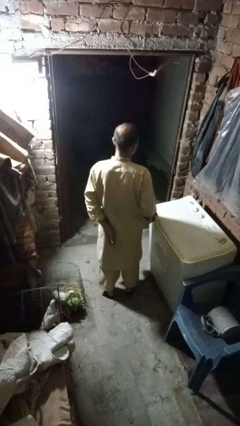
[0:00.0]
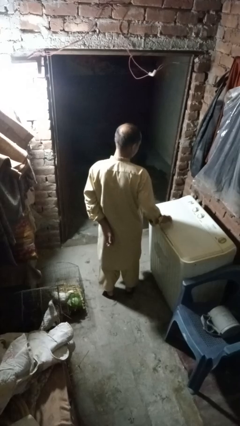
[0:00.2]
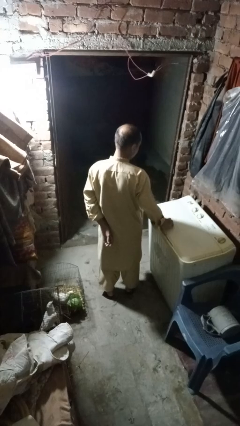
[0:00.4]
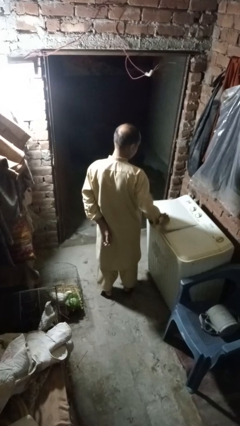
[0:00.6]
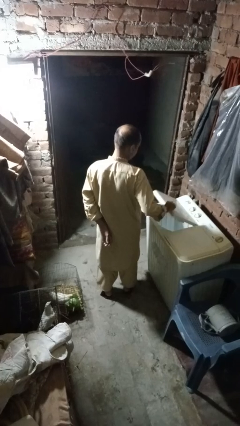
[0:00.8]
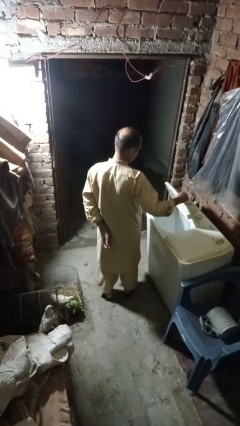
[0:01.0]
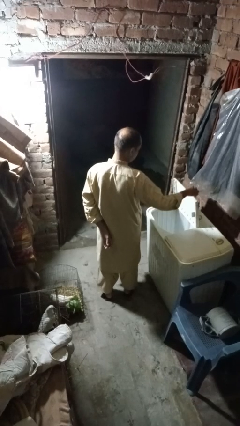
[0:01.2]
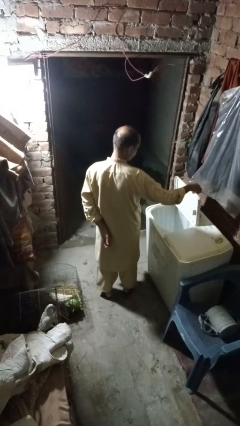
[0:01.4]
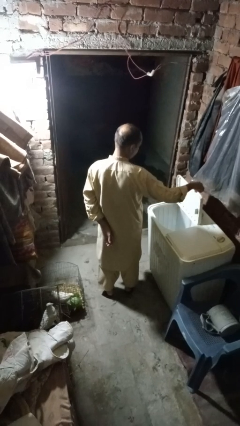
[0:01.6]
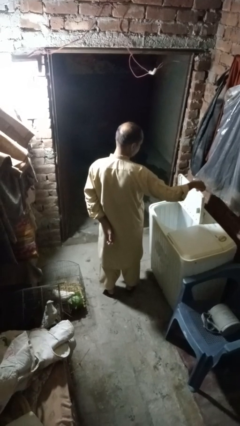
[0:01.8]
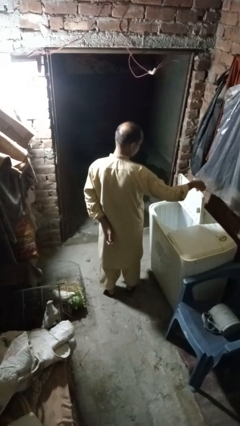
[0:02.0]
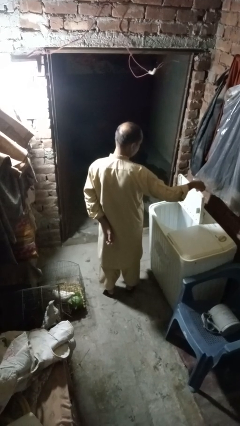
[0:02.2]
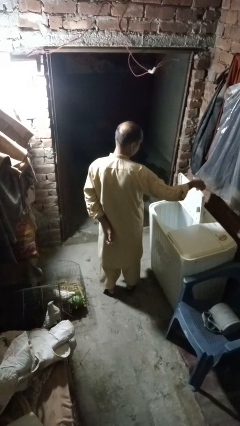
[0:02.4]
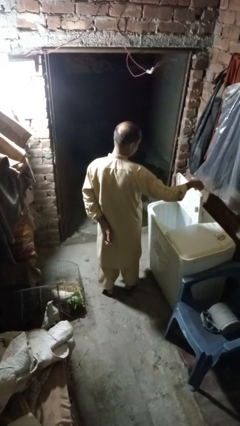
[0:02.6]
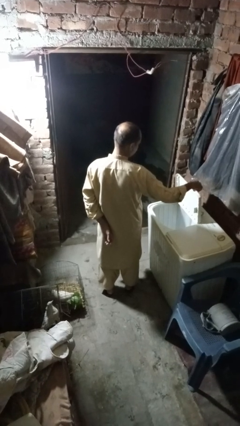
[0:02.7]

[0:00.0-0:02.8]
person opens clothes washer

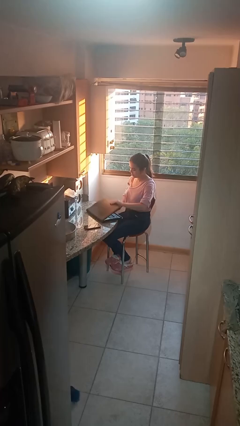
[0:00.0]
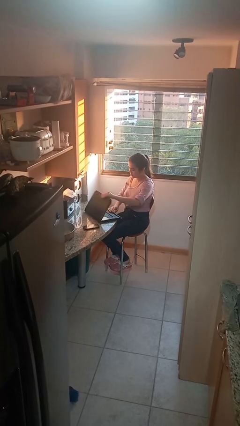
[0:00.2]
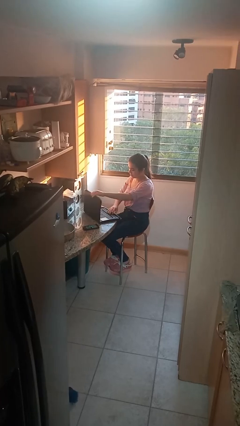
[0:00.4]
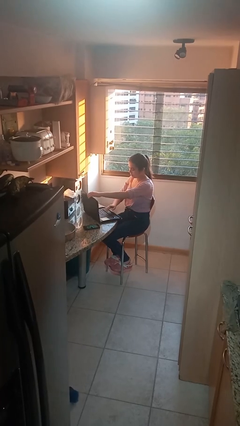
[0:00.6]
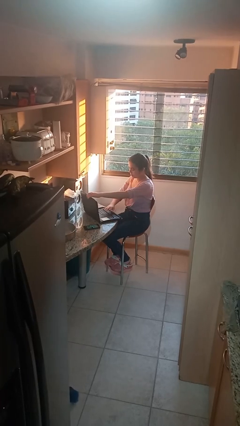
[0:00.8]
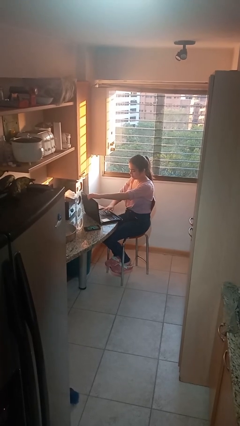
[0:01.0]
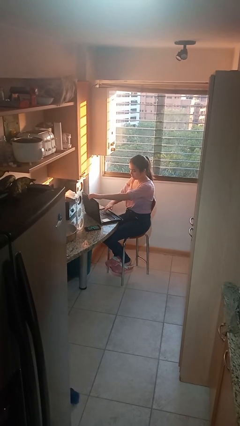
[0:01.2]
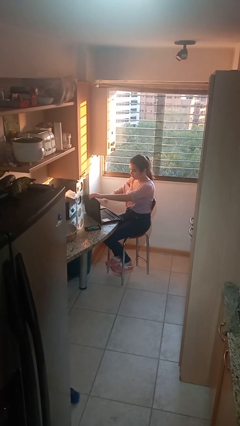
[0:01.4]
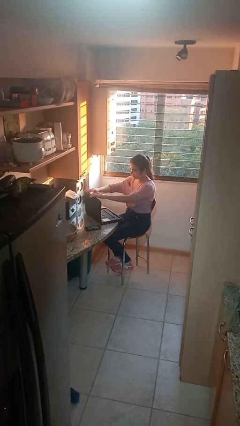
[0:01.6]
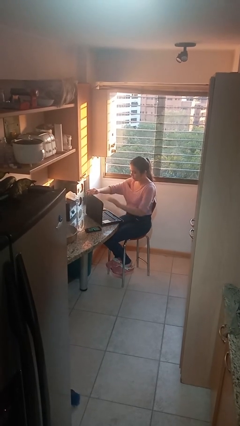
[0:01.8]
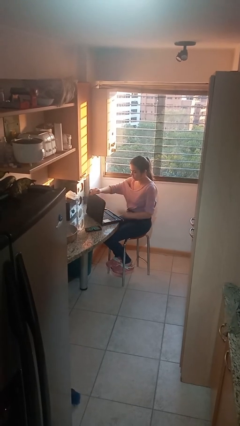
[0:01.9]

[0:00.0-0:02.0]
person interacts with laptop

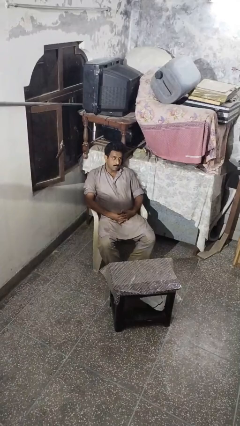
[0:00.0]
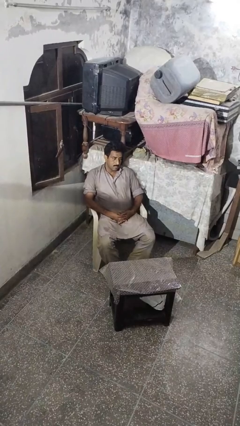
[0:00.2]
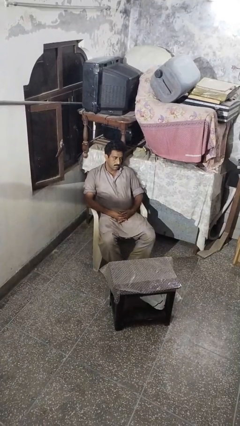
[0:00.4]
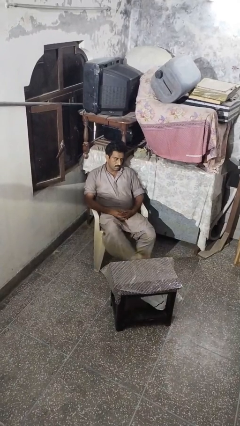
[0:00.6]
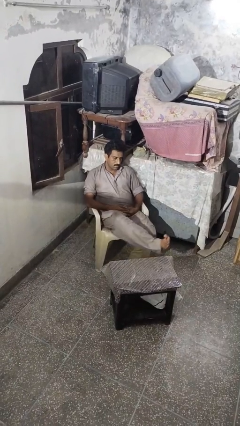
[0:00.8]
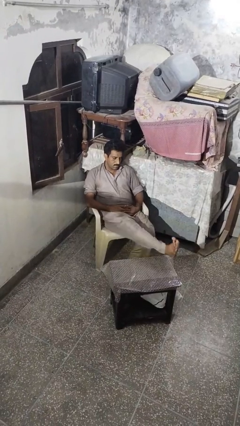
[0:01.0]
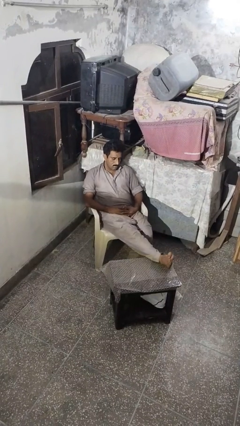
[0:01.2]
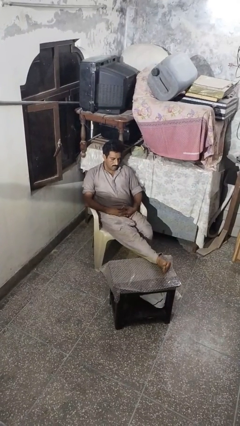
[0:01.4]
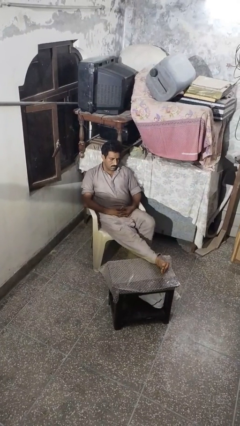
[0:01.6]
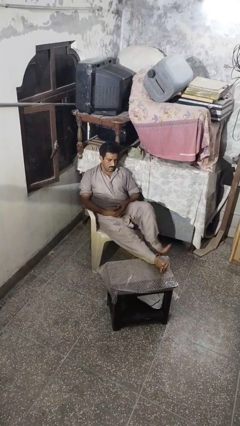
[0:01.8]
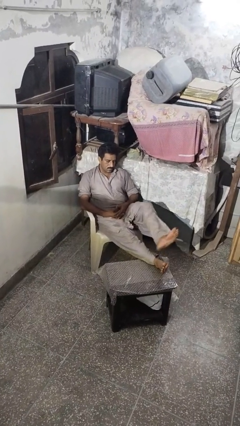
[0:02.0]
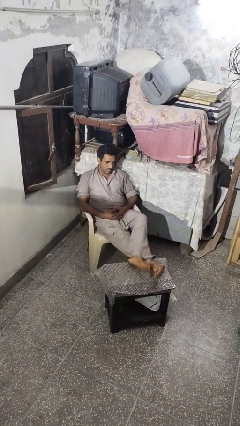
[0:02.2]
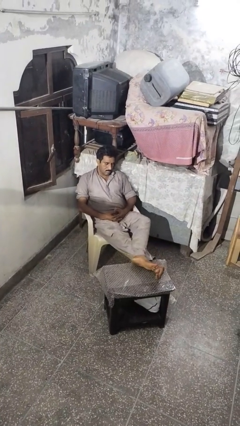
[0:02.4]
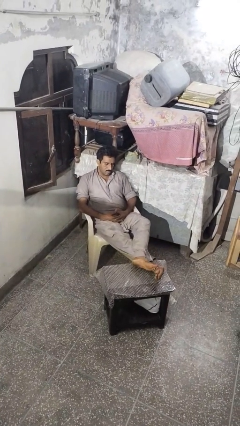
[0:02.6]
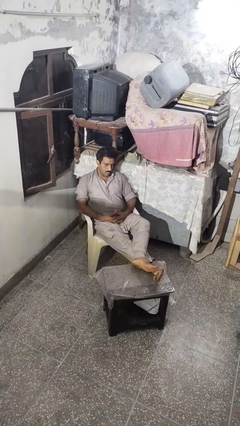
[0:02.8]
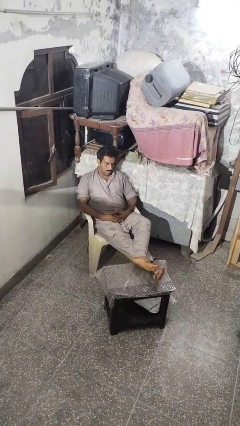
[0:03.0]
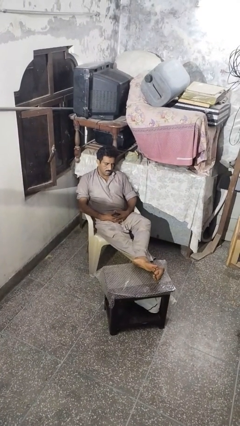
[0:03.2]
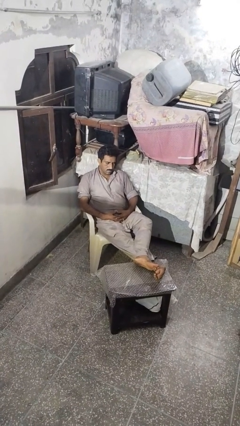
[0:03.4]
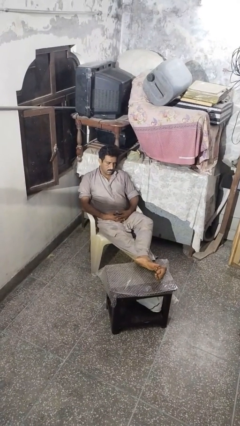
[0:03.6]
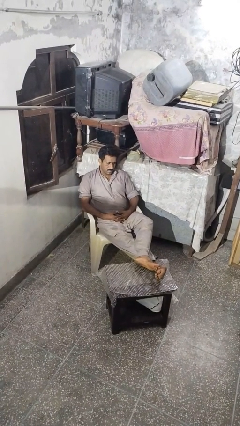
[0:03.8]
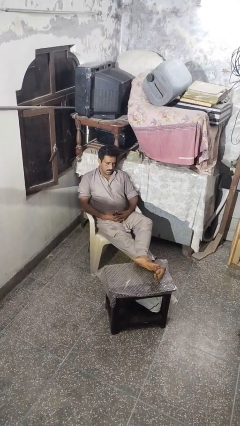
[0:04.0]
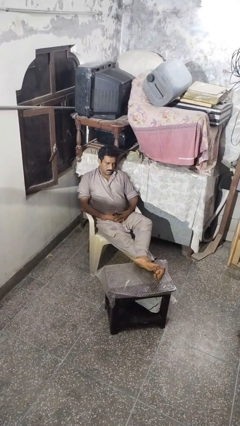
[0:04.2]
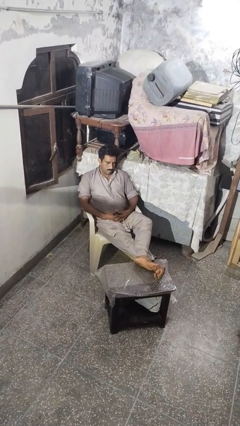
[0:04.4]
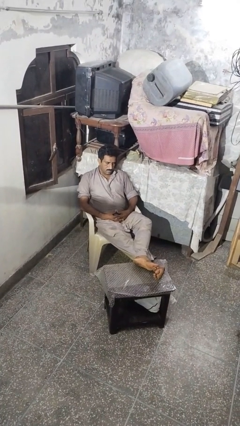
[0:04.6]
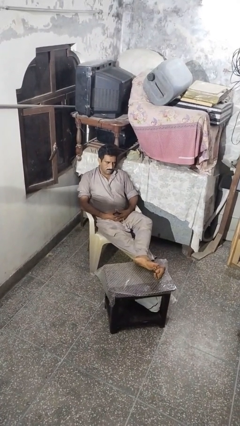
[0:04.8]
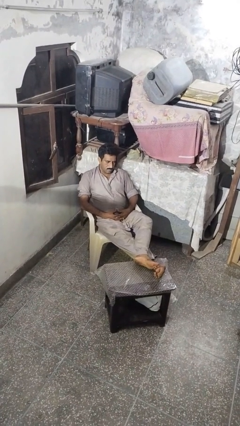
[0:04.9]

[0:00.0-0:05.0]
person puts feet up

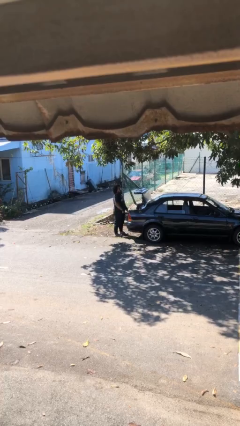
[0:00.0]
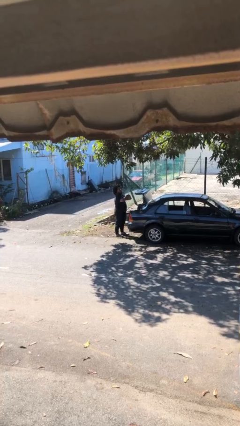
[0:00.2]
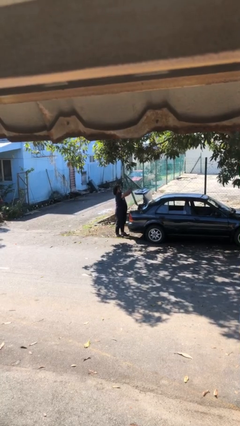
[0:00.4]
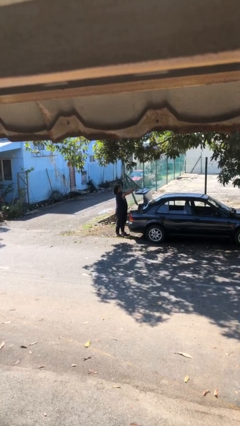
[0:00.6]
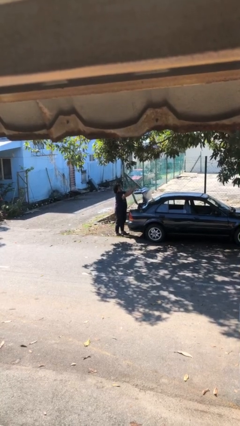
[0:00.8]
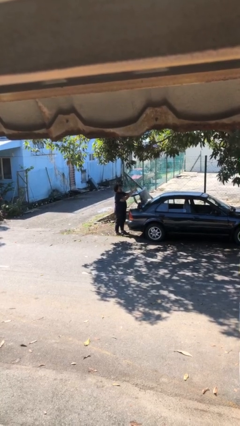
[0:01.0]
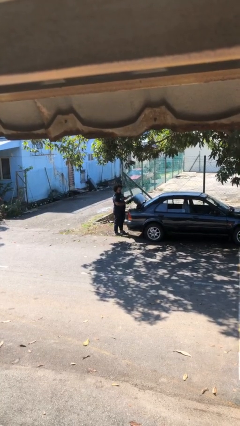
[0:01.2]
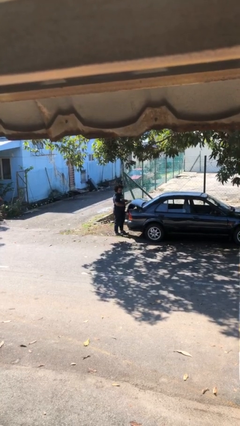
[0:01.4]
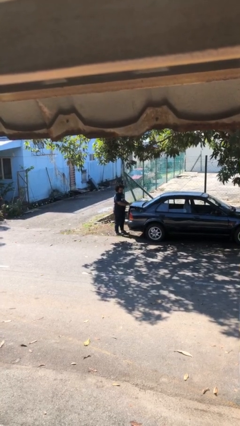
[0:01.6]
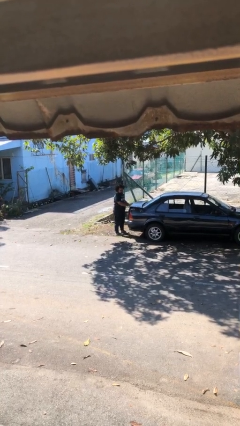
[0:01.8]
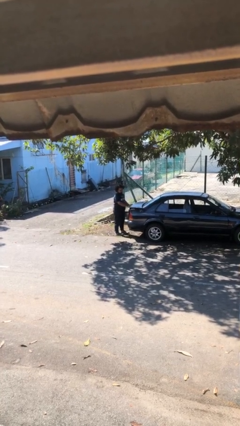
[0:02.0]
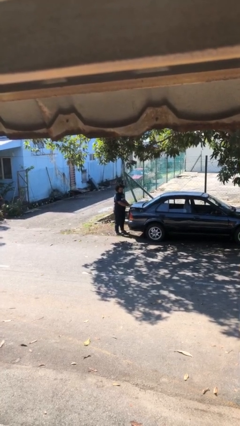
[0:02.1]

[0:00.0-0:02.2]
person closes car trunk

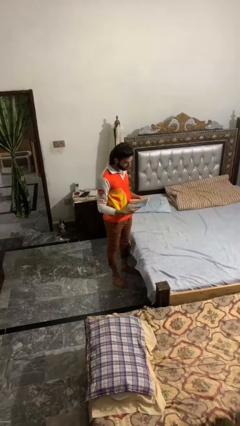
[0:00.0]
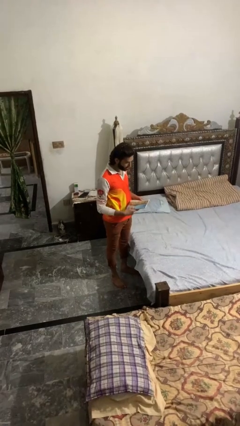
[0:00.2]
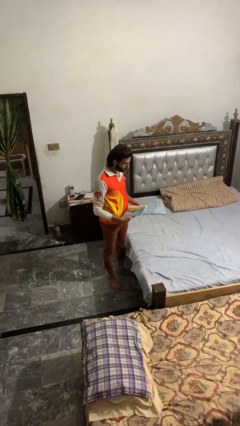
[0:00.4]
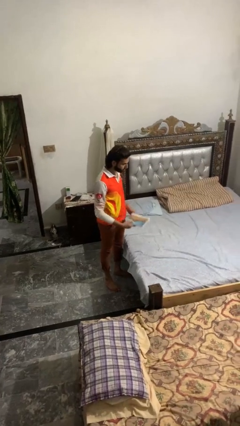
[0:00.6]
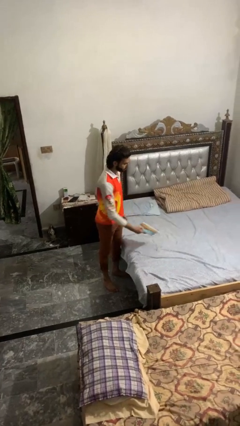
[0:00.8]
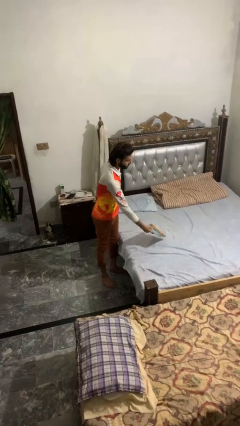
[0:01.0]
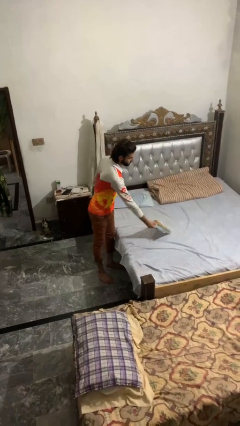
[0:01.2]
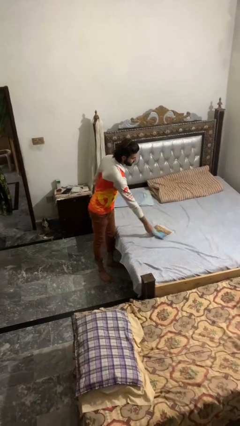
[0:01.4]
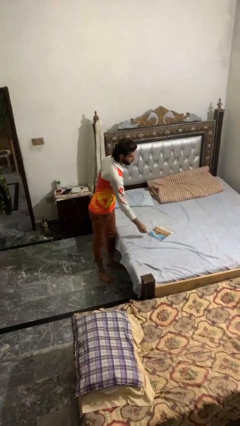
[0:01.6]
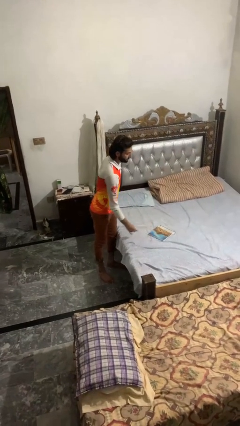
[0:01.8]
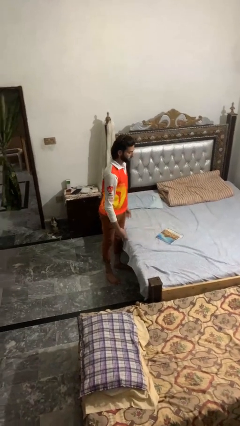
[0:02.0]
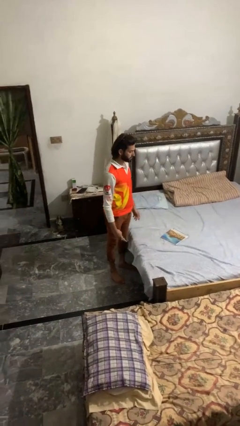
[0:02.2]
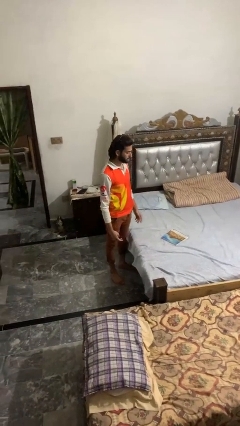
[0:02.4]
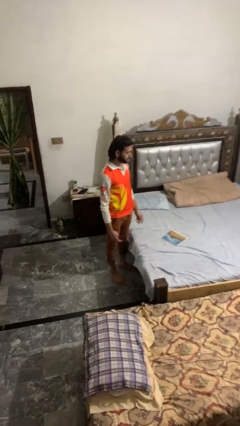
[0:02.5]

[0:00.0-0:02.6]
person puts down object on bed

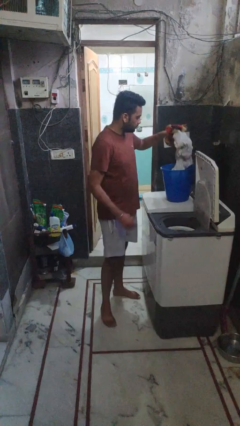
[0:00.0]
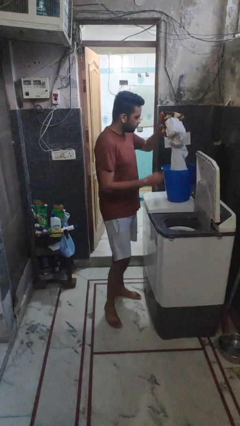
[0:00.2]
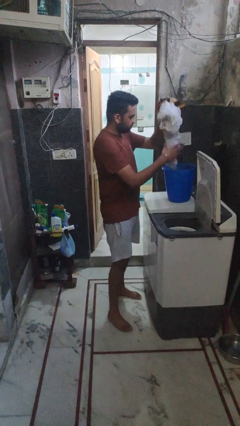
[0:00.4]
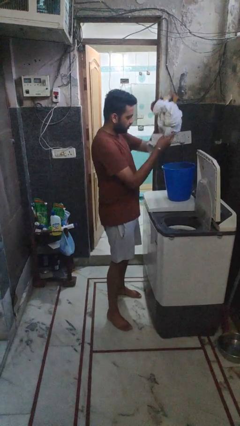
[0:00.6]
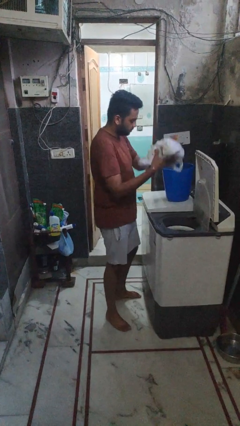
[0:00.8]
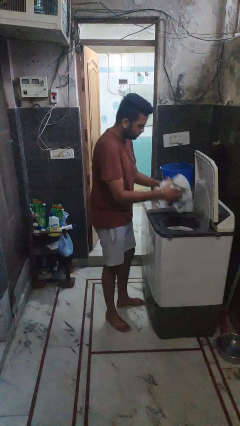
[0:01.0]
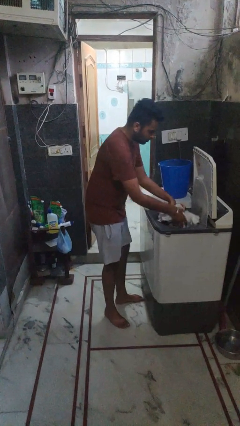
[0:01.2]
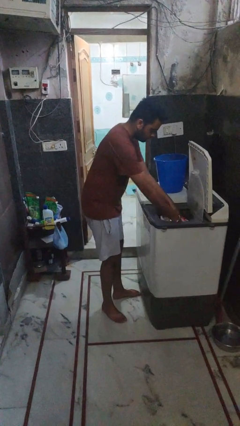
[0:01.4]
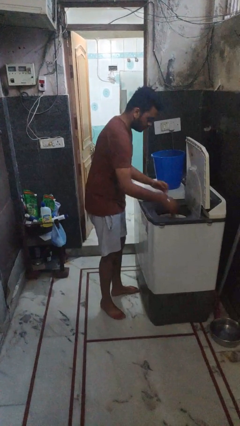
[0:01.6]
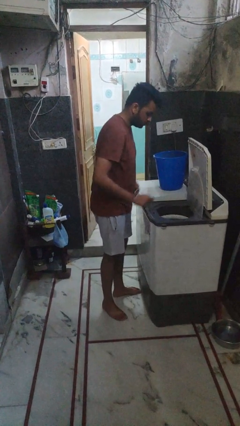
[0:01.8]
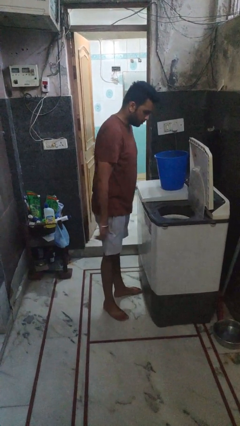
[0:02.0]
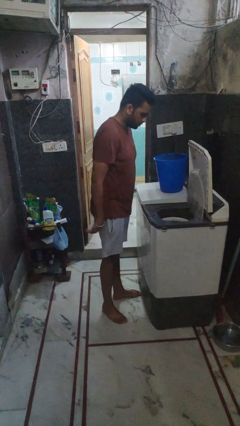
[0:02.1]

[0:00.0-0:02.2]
person loads dryer

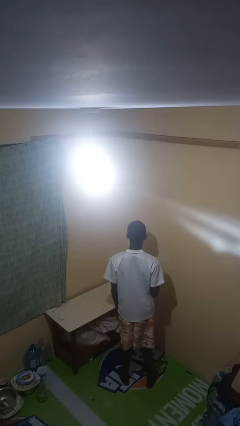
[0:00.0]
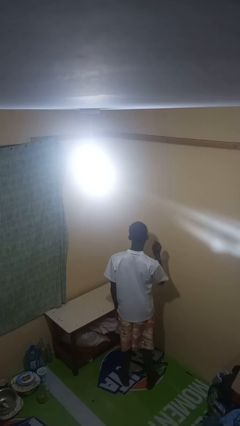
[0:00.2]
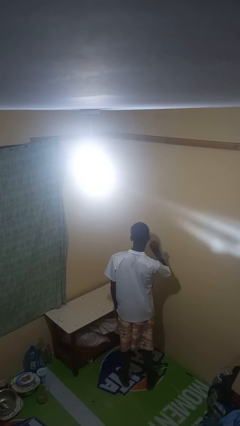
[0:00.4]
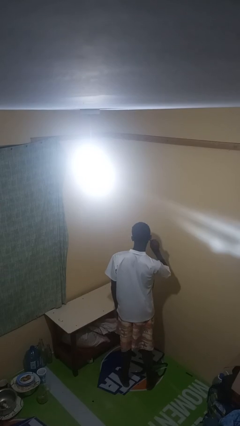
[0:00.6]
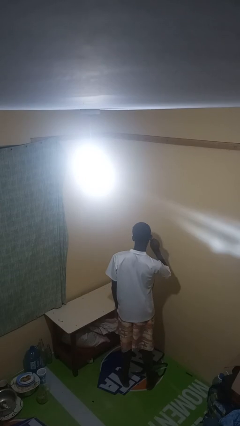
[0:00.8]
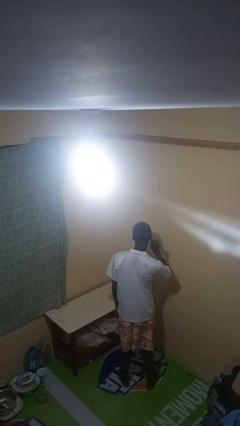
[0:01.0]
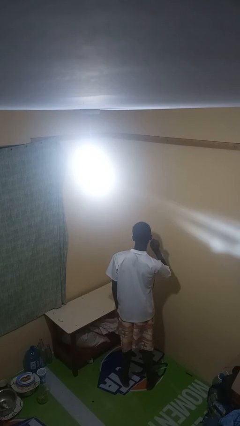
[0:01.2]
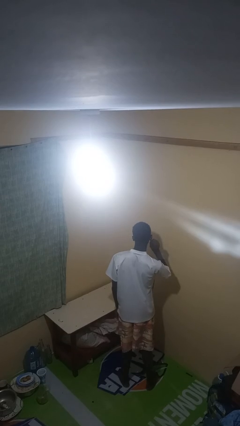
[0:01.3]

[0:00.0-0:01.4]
person gestures listen closely
